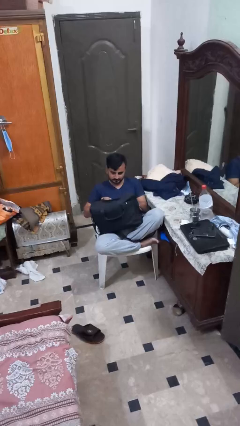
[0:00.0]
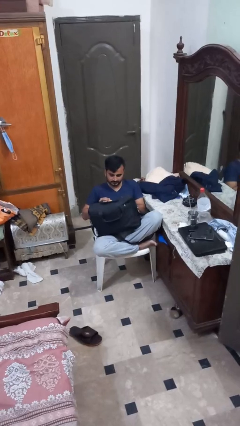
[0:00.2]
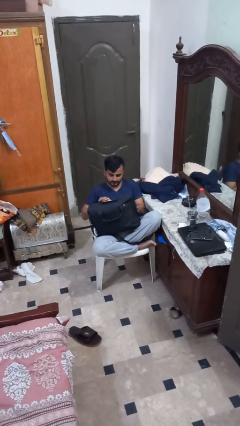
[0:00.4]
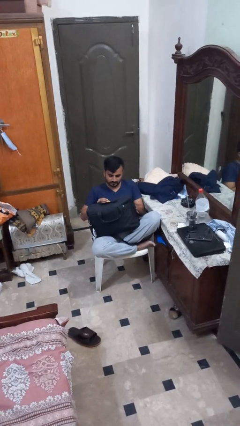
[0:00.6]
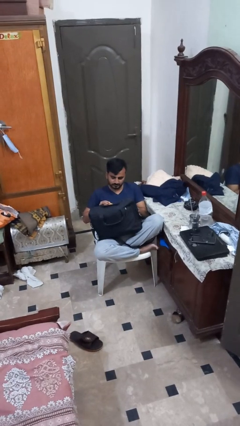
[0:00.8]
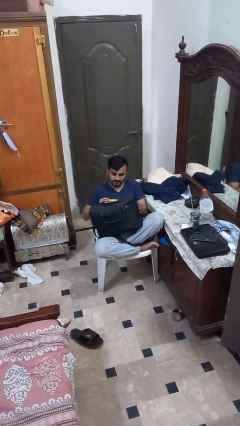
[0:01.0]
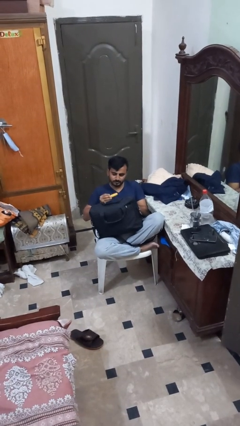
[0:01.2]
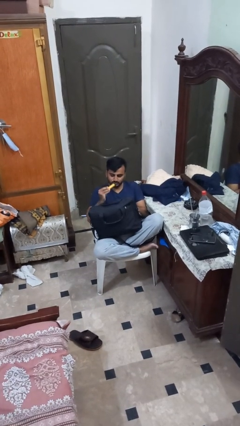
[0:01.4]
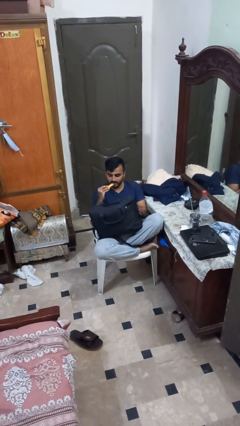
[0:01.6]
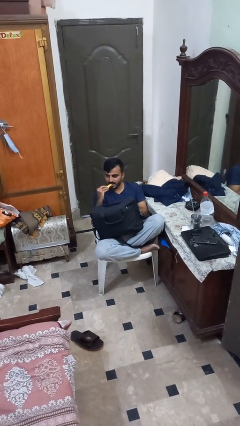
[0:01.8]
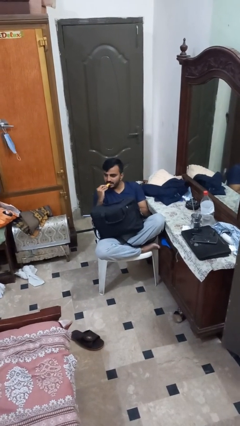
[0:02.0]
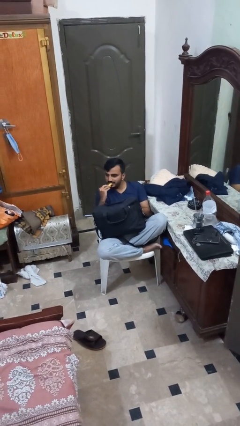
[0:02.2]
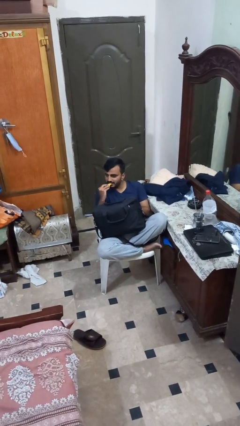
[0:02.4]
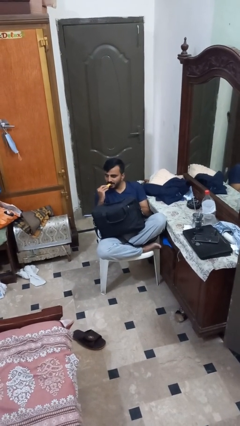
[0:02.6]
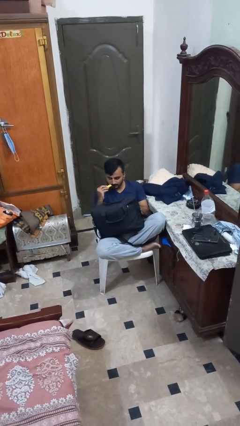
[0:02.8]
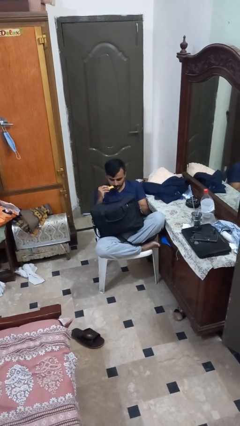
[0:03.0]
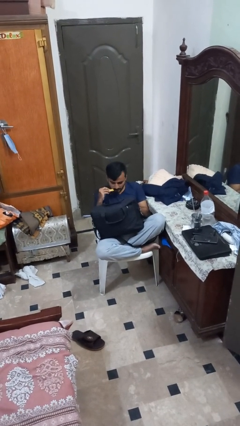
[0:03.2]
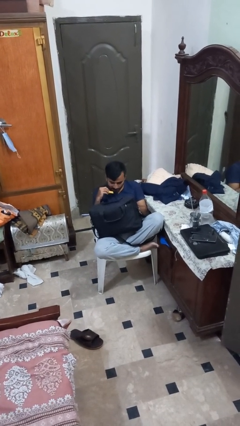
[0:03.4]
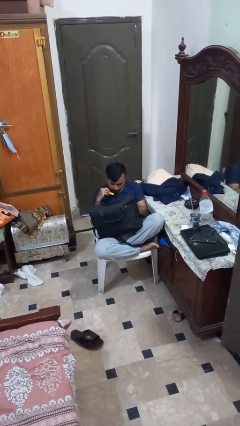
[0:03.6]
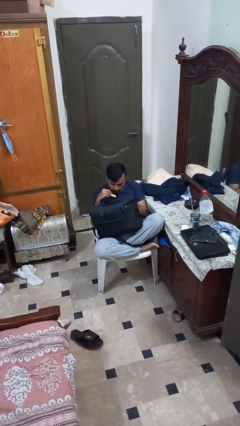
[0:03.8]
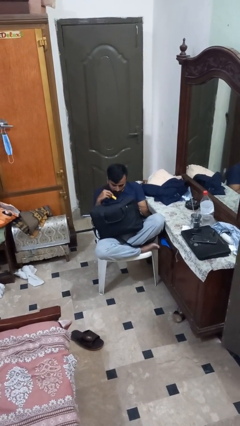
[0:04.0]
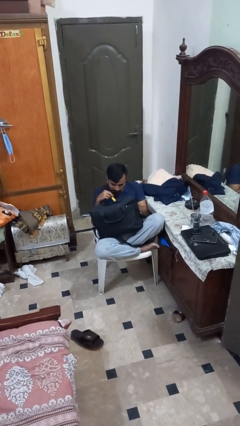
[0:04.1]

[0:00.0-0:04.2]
person eats snack from bag

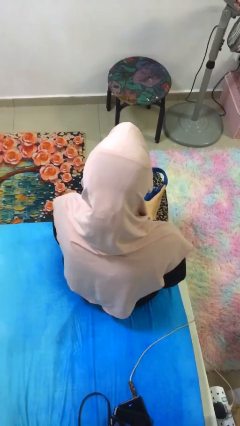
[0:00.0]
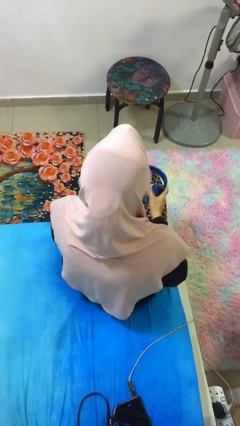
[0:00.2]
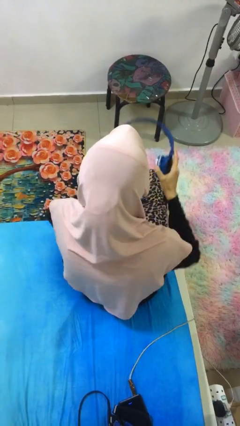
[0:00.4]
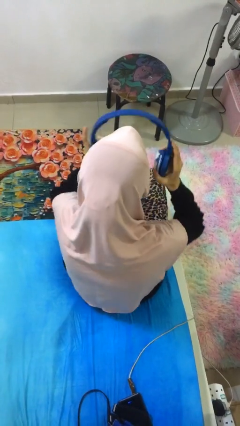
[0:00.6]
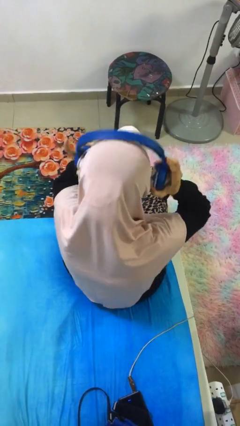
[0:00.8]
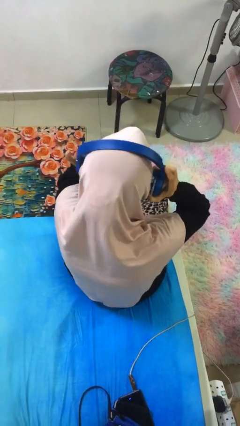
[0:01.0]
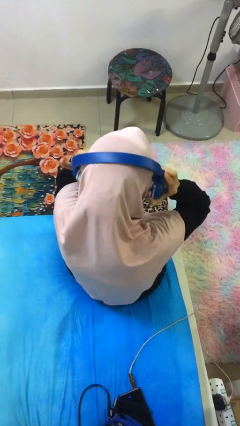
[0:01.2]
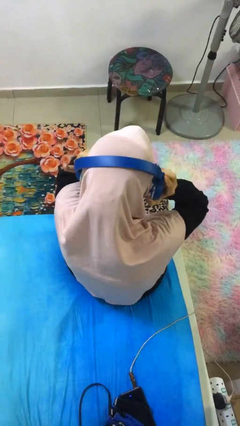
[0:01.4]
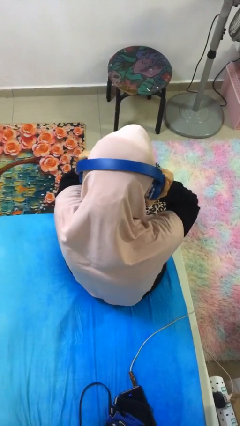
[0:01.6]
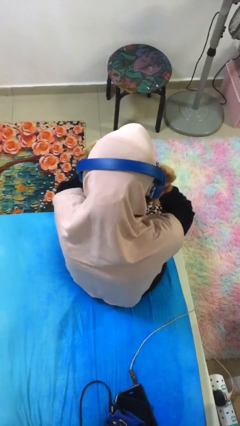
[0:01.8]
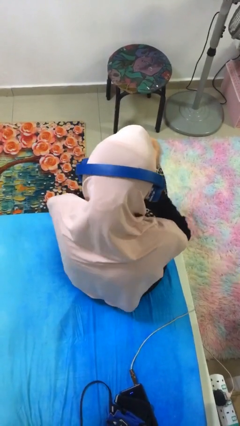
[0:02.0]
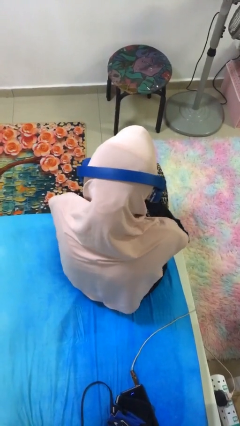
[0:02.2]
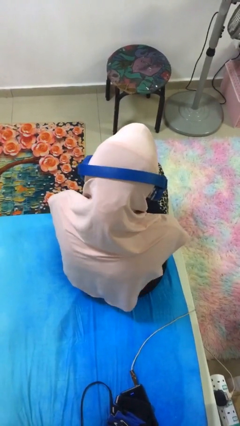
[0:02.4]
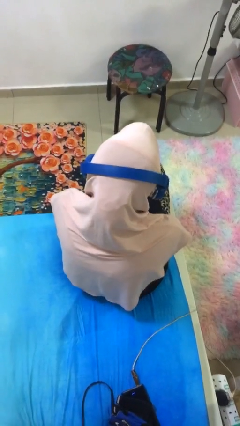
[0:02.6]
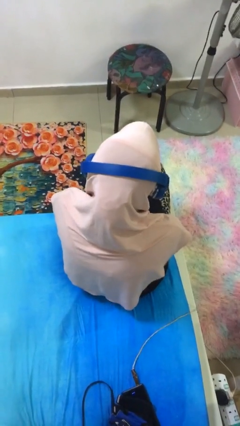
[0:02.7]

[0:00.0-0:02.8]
person puts on headphones

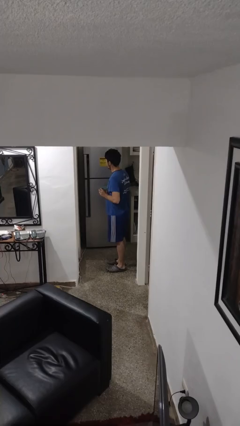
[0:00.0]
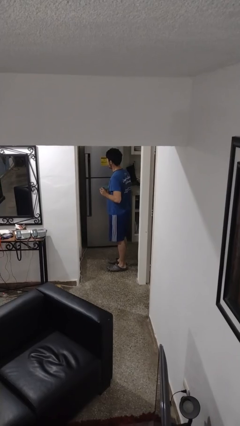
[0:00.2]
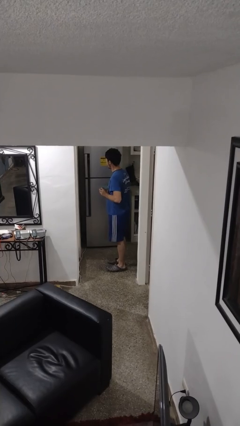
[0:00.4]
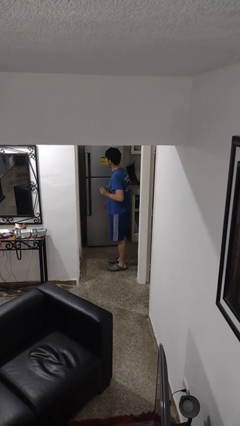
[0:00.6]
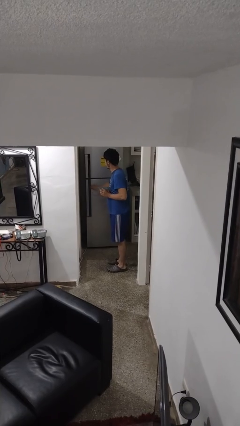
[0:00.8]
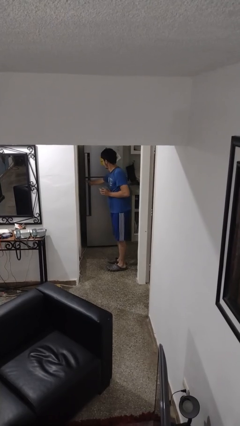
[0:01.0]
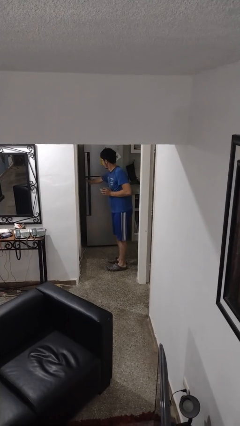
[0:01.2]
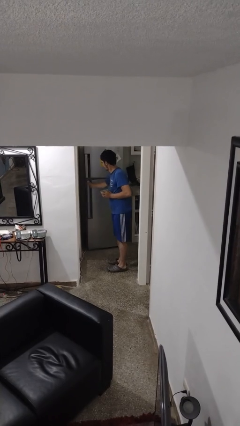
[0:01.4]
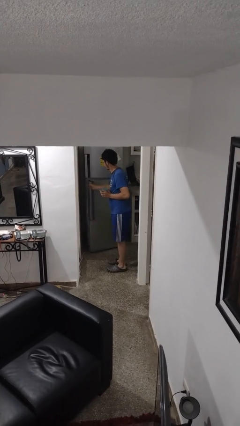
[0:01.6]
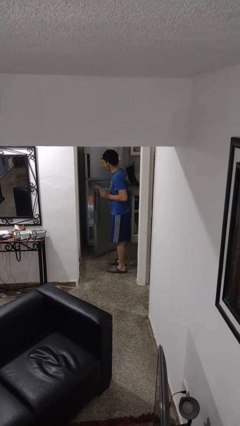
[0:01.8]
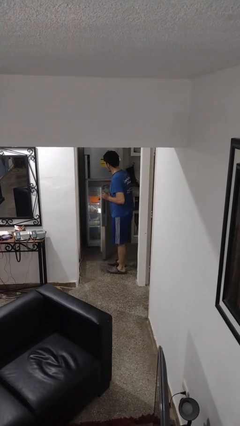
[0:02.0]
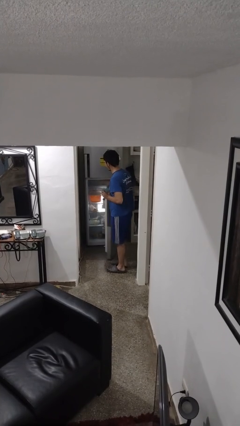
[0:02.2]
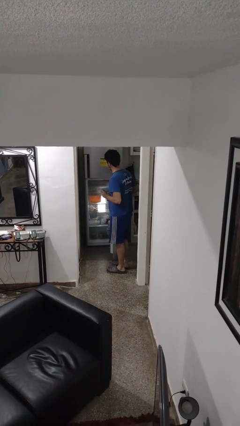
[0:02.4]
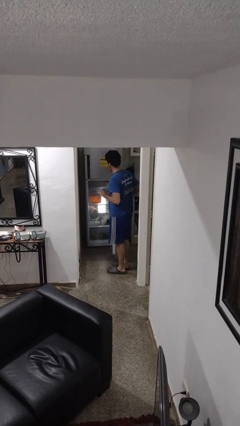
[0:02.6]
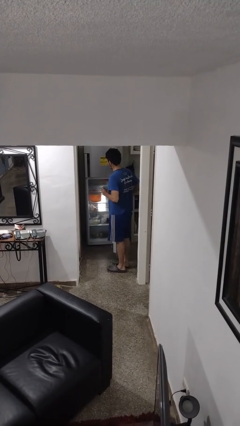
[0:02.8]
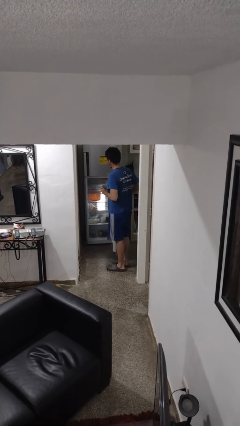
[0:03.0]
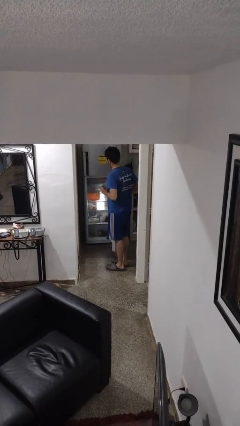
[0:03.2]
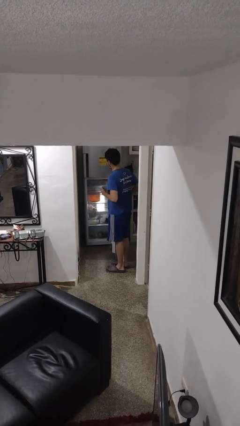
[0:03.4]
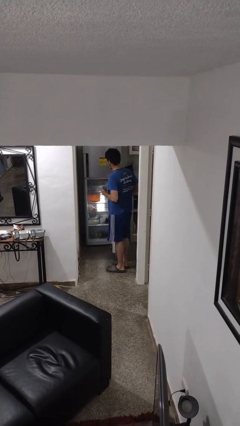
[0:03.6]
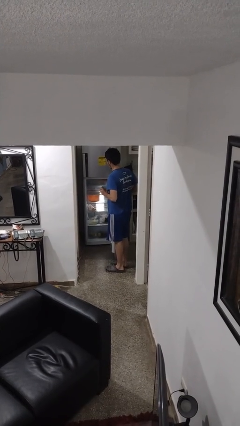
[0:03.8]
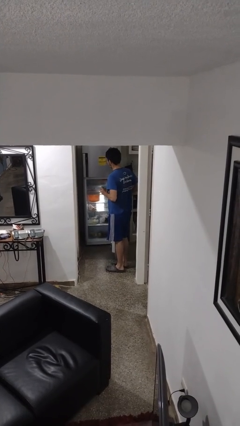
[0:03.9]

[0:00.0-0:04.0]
person opens refrigerator

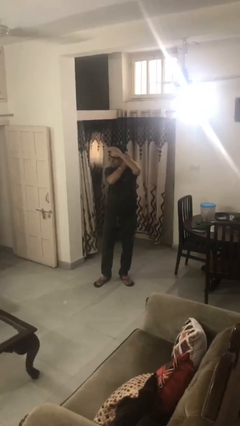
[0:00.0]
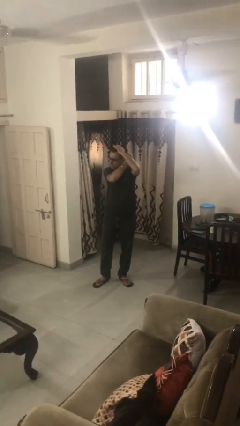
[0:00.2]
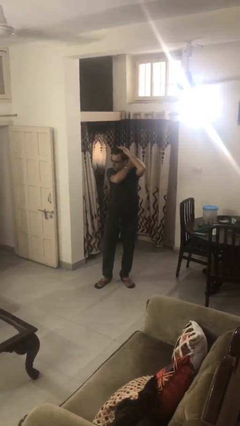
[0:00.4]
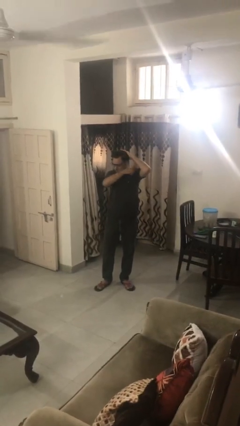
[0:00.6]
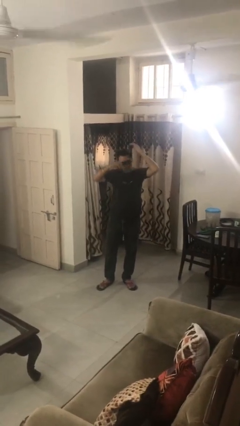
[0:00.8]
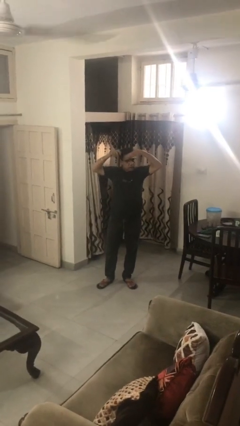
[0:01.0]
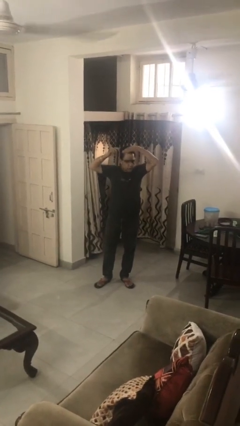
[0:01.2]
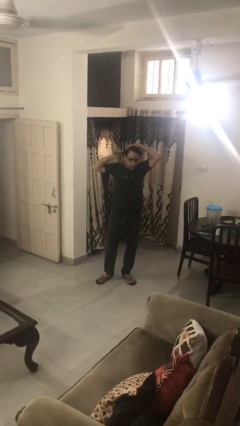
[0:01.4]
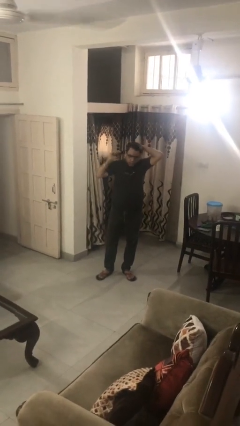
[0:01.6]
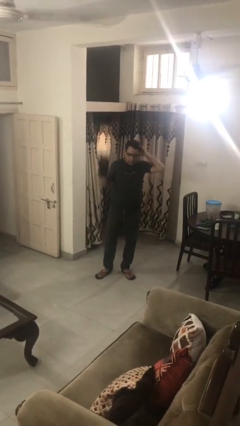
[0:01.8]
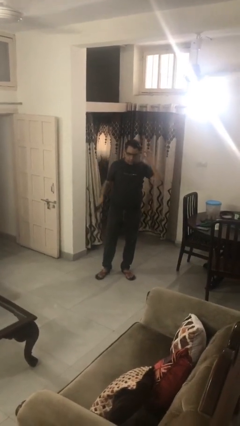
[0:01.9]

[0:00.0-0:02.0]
person brushes hair

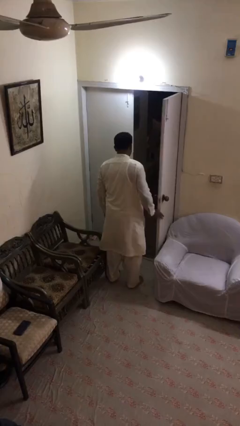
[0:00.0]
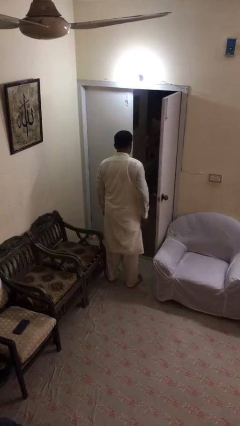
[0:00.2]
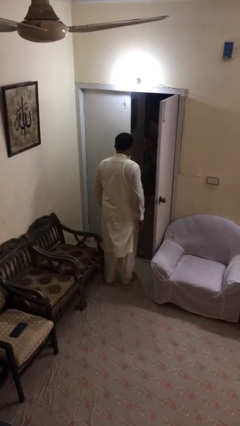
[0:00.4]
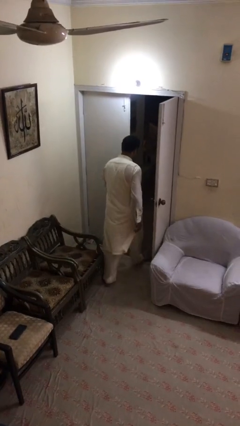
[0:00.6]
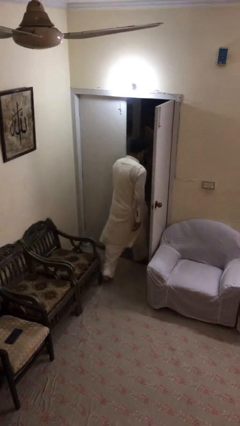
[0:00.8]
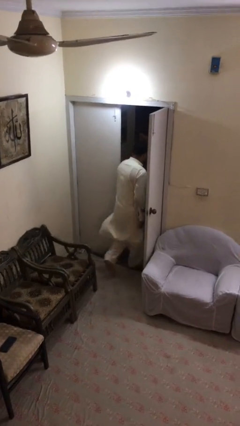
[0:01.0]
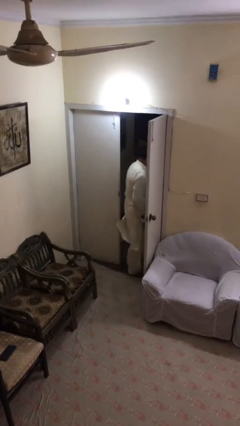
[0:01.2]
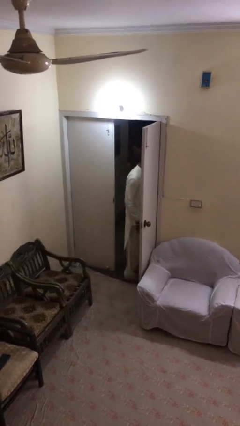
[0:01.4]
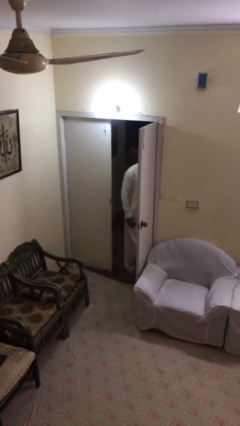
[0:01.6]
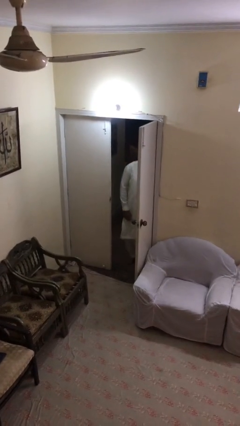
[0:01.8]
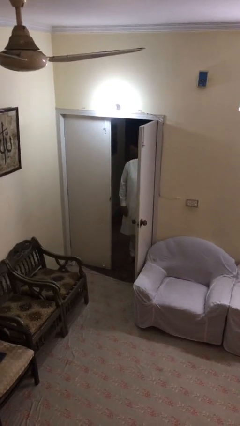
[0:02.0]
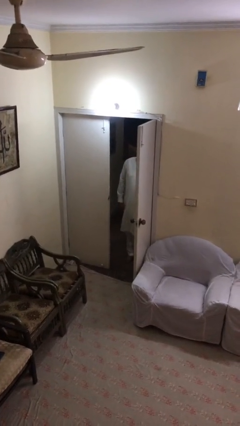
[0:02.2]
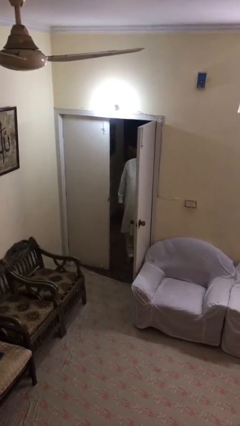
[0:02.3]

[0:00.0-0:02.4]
person exits scene through structure

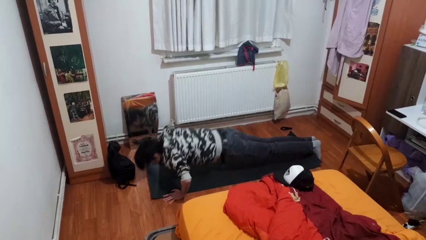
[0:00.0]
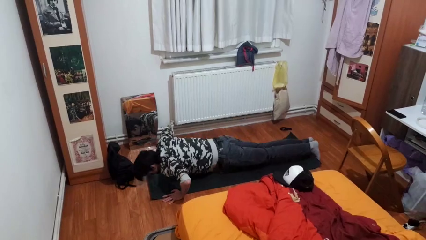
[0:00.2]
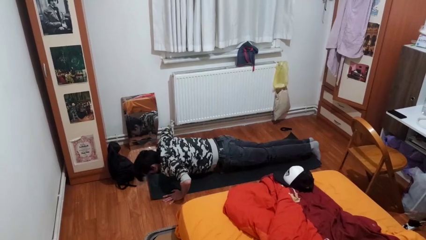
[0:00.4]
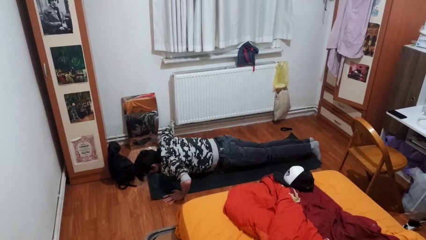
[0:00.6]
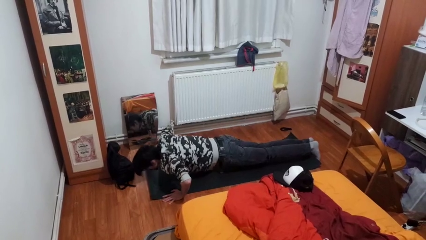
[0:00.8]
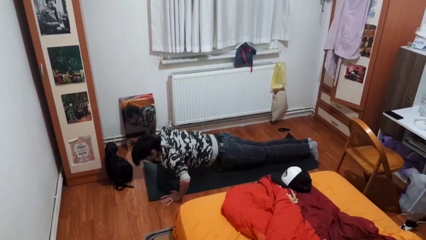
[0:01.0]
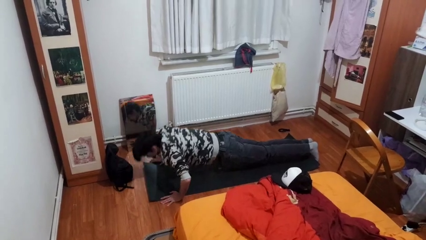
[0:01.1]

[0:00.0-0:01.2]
person exercises with pushup

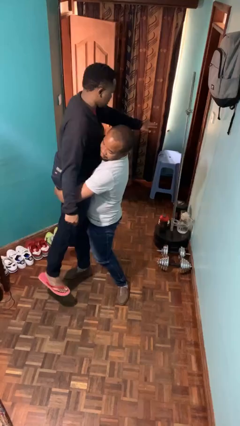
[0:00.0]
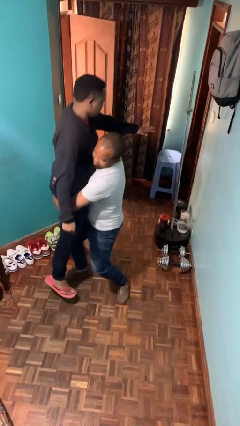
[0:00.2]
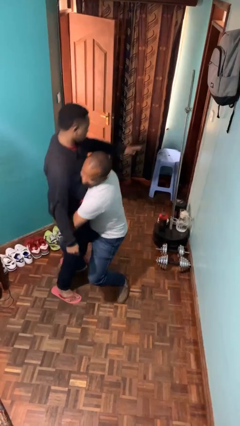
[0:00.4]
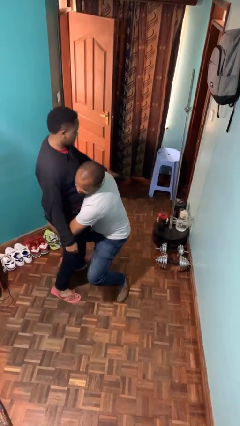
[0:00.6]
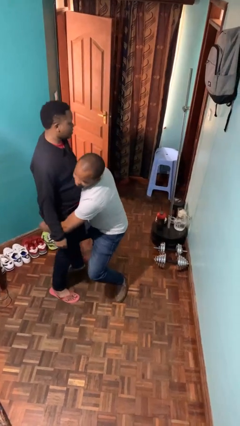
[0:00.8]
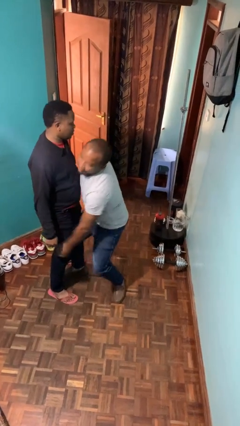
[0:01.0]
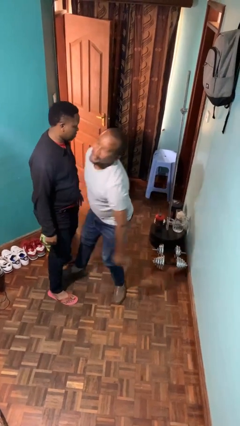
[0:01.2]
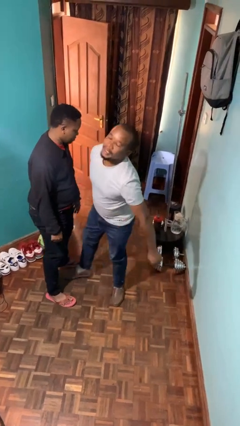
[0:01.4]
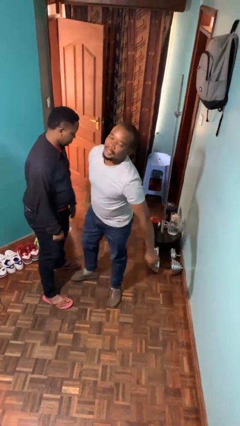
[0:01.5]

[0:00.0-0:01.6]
person puts down person
